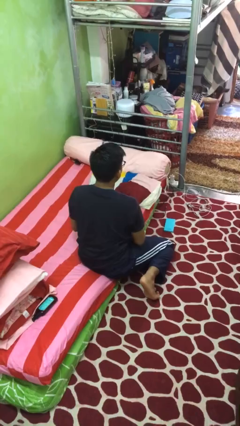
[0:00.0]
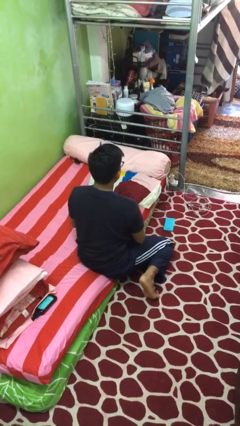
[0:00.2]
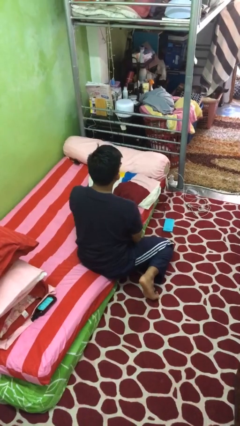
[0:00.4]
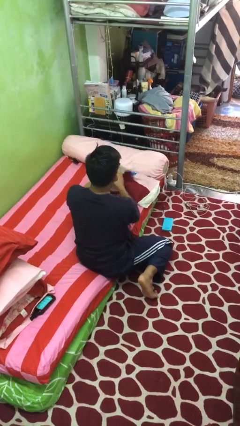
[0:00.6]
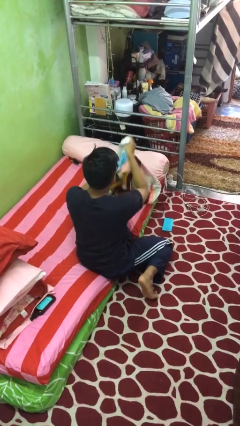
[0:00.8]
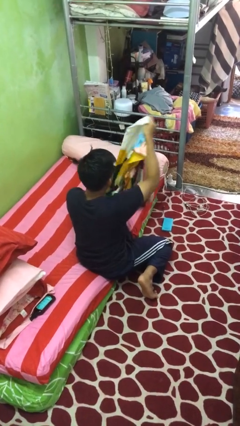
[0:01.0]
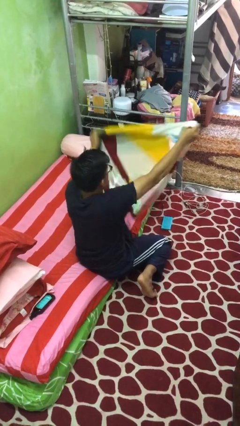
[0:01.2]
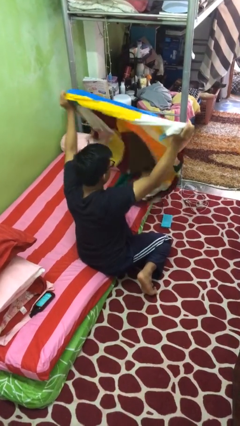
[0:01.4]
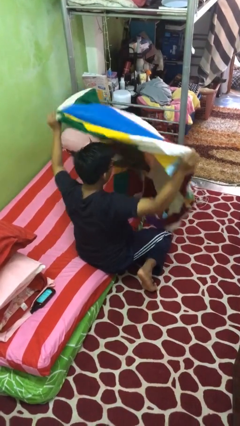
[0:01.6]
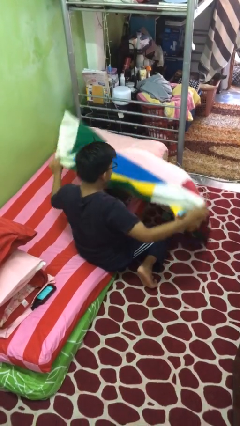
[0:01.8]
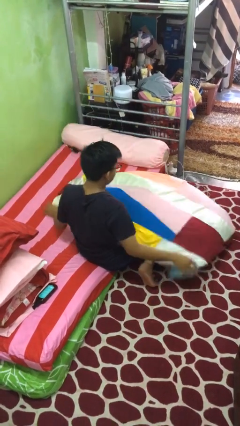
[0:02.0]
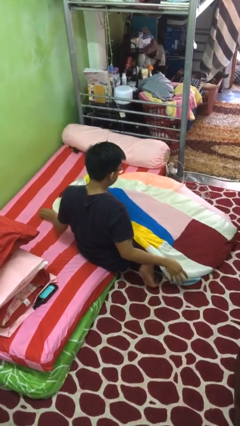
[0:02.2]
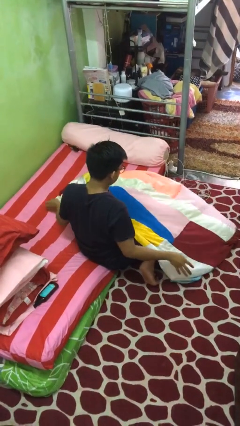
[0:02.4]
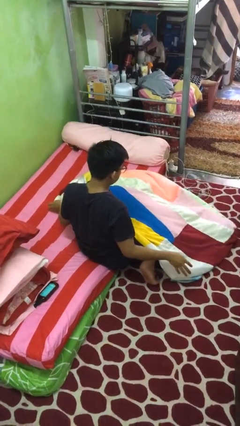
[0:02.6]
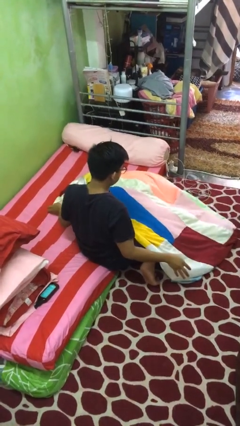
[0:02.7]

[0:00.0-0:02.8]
person unfolds blanket

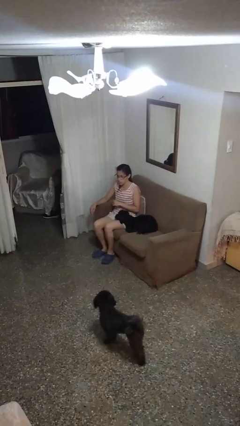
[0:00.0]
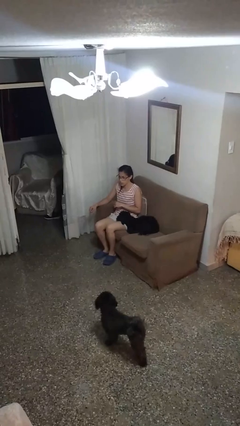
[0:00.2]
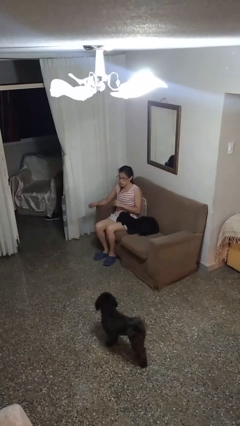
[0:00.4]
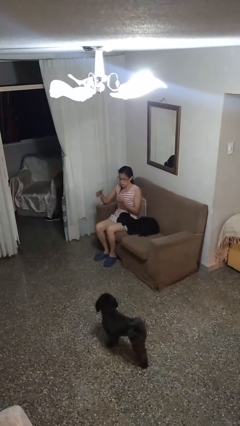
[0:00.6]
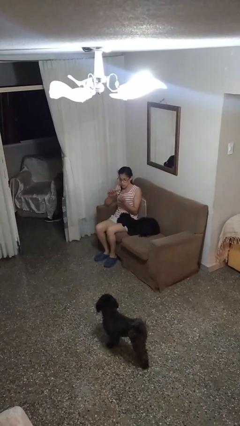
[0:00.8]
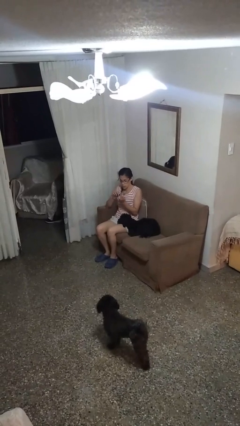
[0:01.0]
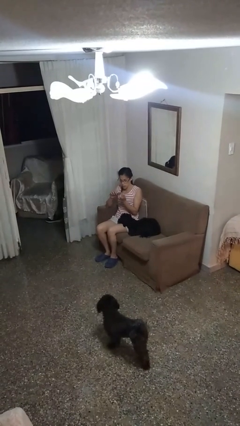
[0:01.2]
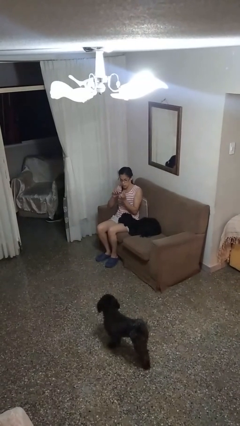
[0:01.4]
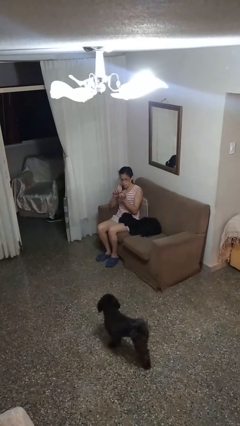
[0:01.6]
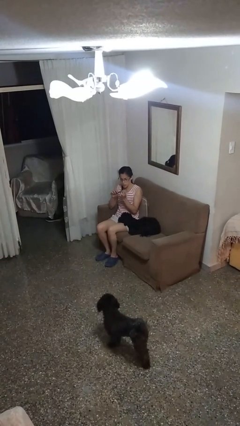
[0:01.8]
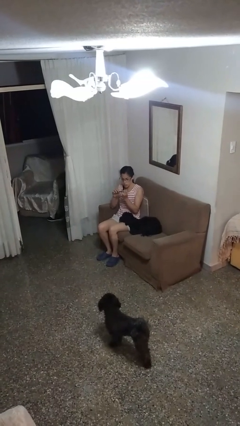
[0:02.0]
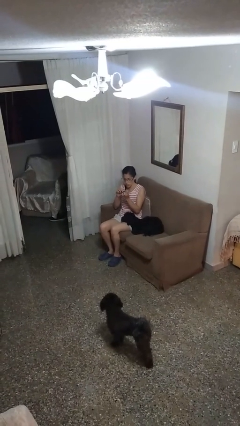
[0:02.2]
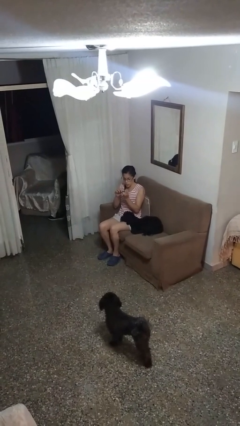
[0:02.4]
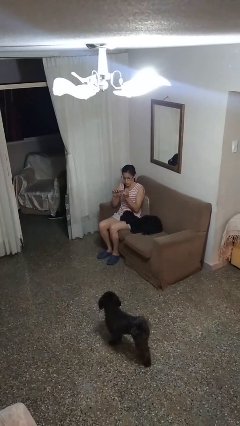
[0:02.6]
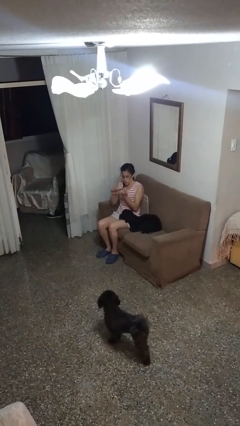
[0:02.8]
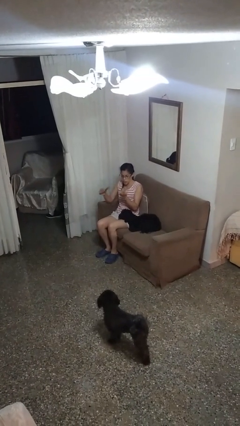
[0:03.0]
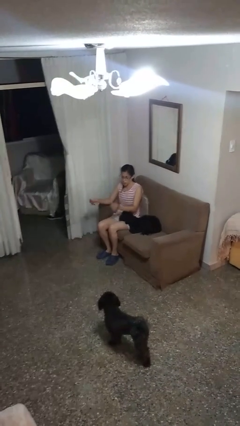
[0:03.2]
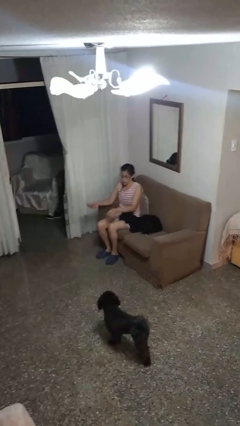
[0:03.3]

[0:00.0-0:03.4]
person files fingernails

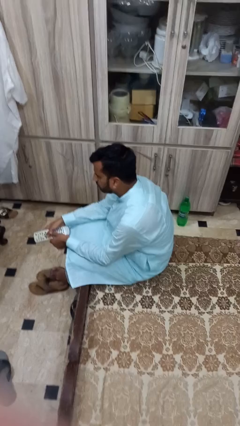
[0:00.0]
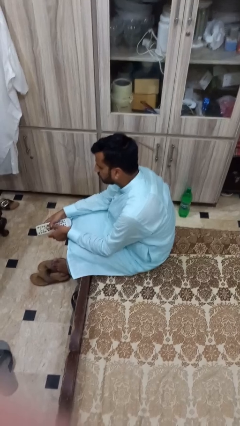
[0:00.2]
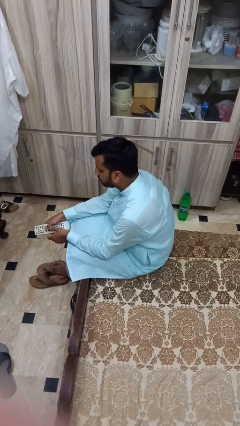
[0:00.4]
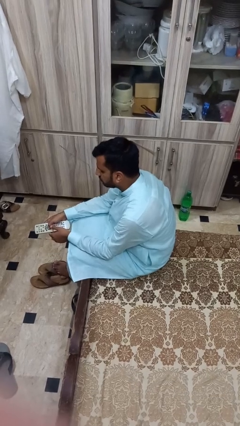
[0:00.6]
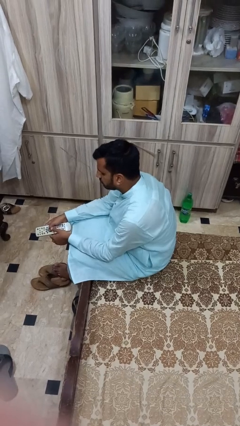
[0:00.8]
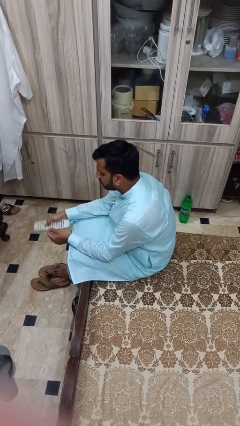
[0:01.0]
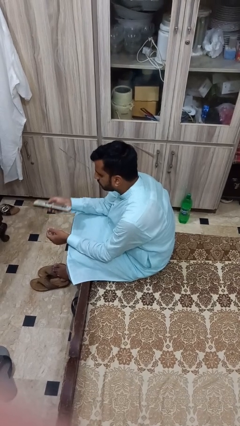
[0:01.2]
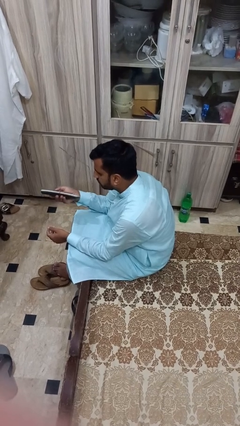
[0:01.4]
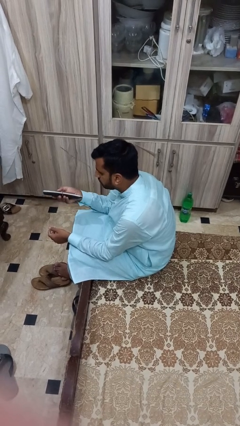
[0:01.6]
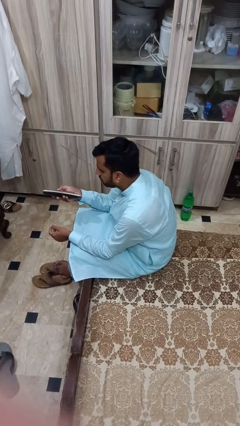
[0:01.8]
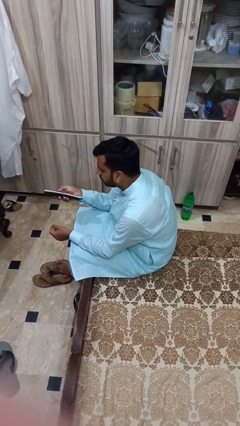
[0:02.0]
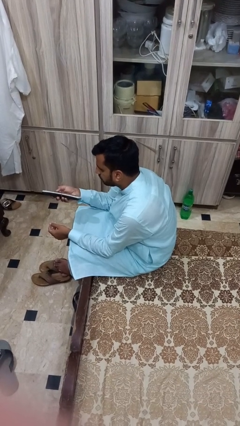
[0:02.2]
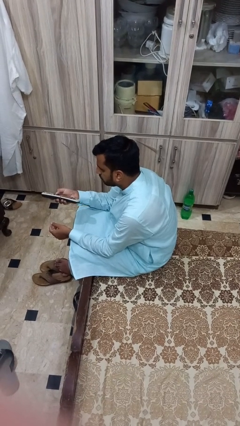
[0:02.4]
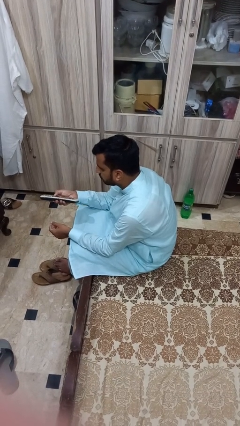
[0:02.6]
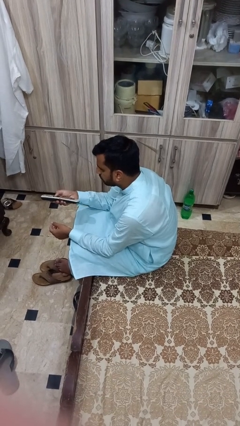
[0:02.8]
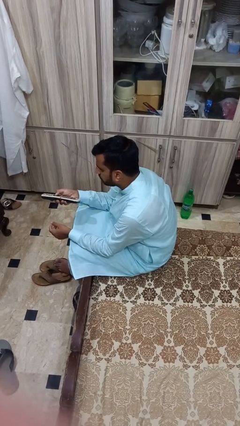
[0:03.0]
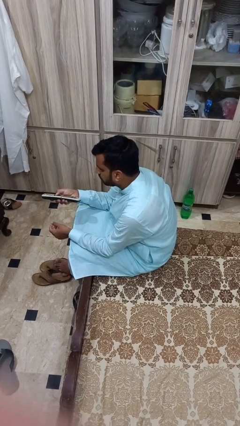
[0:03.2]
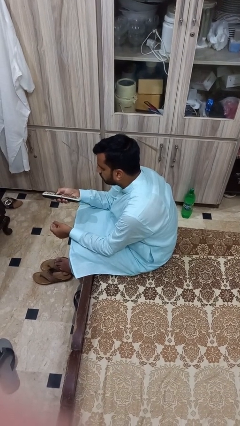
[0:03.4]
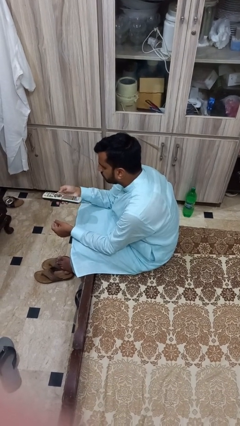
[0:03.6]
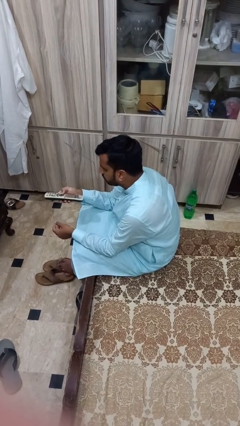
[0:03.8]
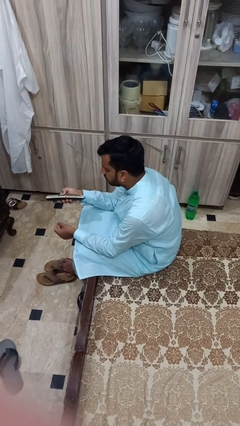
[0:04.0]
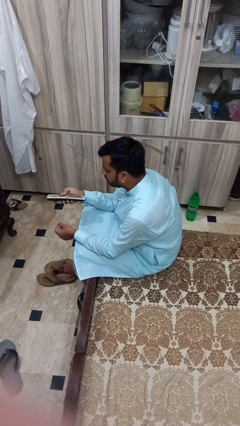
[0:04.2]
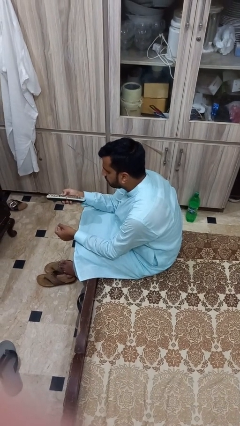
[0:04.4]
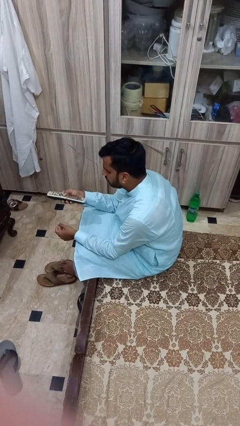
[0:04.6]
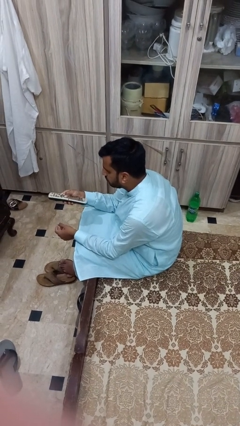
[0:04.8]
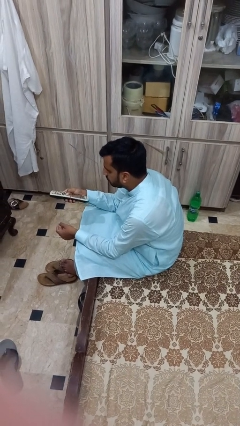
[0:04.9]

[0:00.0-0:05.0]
person uses television remote

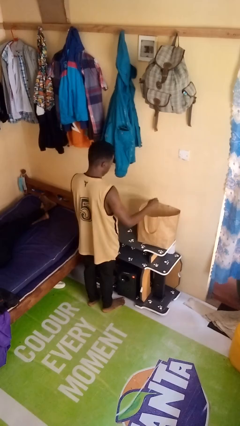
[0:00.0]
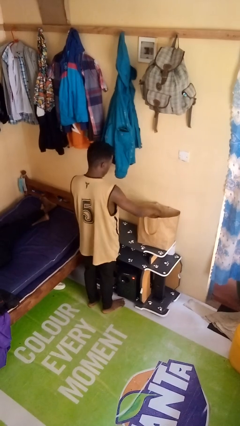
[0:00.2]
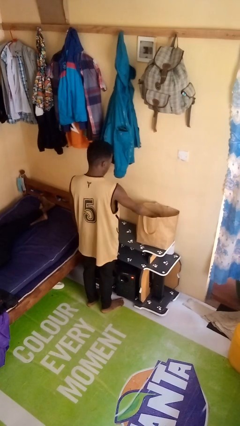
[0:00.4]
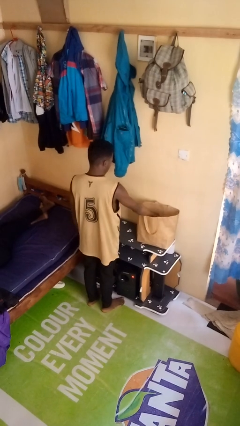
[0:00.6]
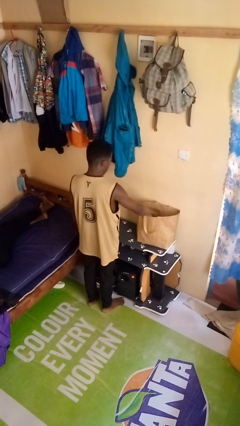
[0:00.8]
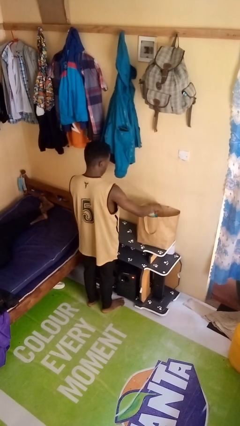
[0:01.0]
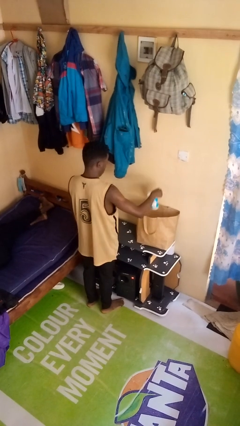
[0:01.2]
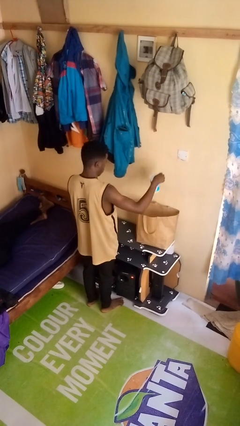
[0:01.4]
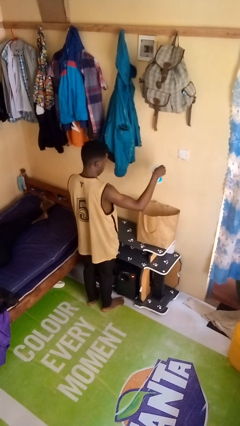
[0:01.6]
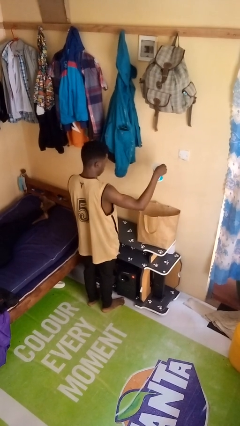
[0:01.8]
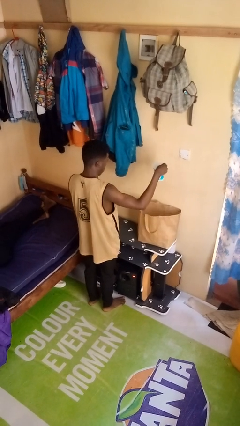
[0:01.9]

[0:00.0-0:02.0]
person takes object from bag

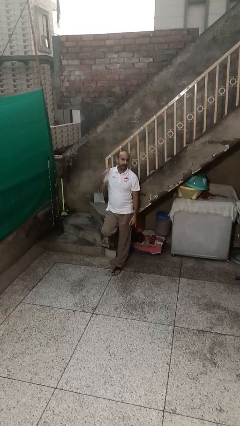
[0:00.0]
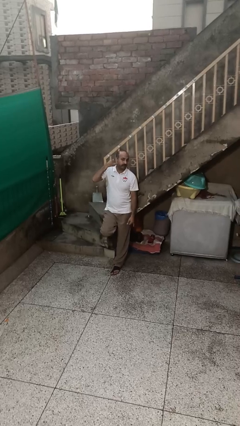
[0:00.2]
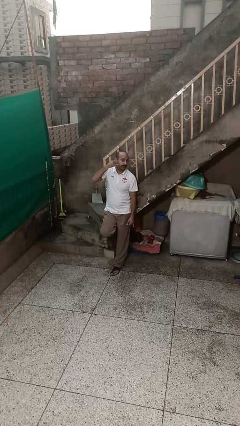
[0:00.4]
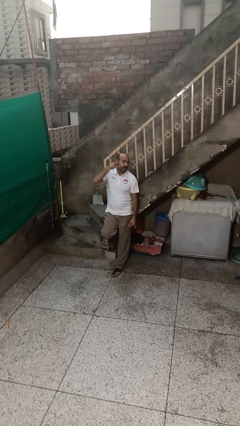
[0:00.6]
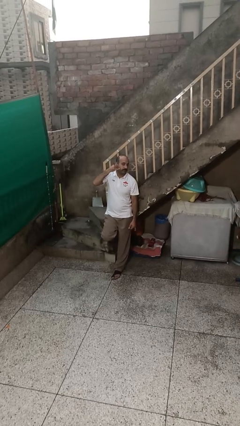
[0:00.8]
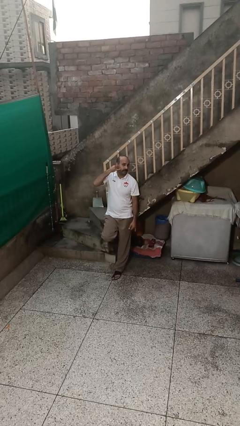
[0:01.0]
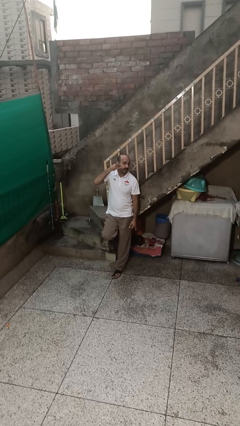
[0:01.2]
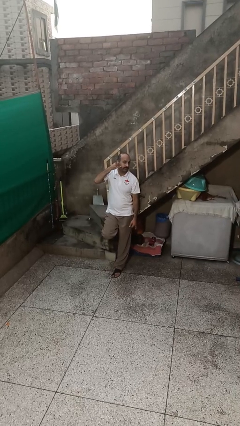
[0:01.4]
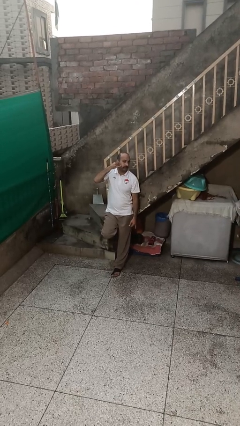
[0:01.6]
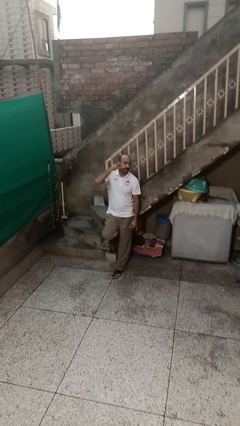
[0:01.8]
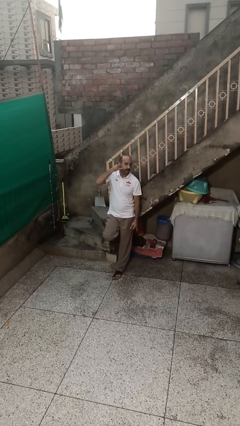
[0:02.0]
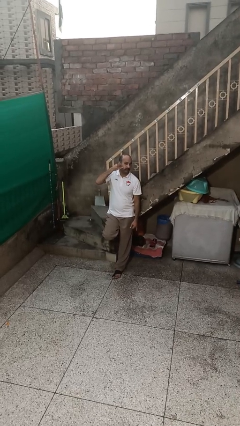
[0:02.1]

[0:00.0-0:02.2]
person gestures call me

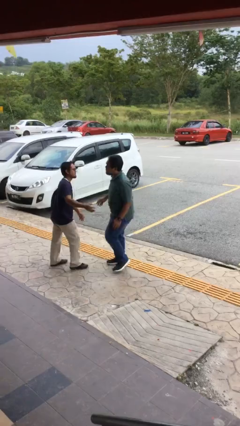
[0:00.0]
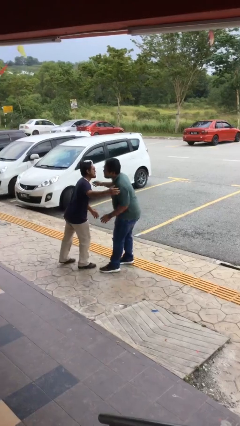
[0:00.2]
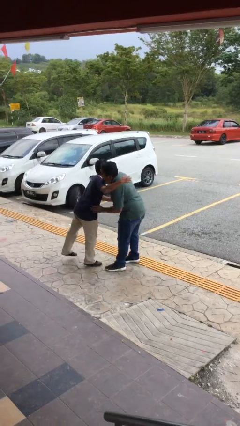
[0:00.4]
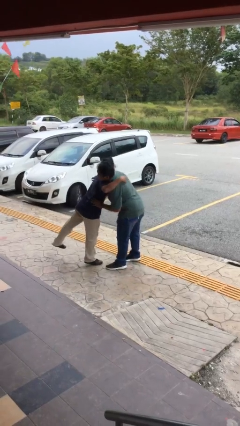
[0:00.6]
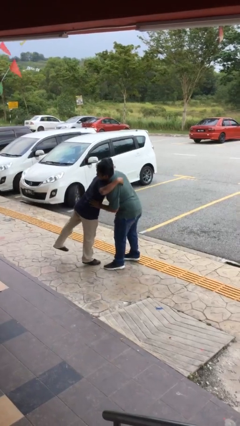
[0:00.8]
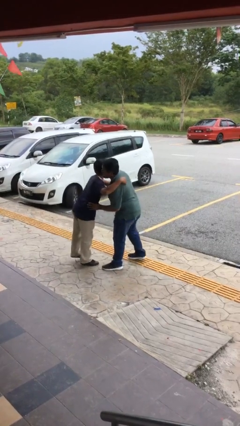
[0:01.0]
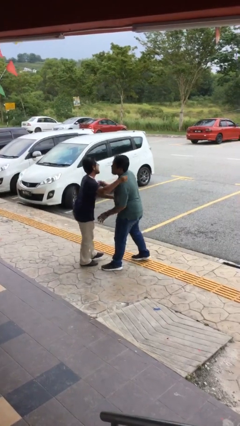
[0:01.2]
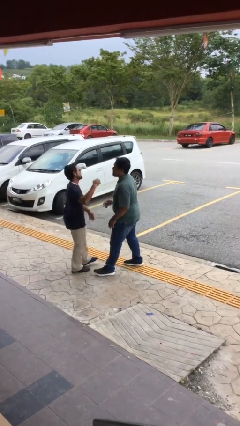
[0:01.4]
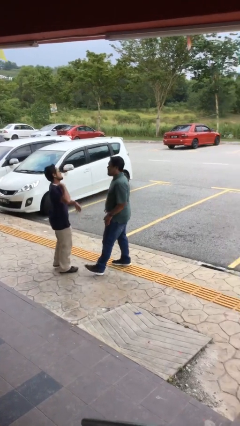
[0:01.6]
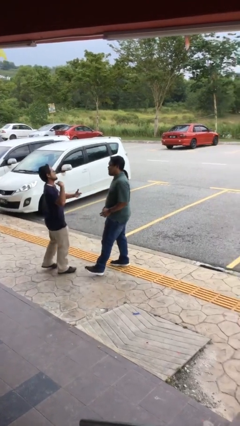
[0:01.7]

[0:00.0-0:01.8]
person embraces person
